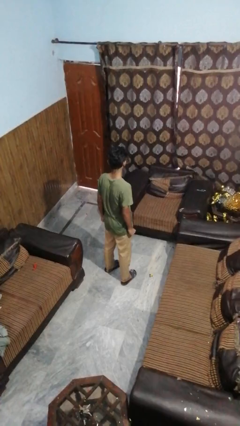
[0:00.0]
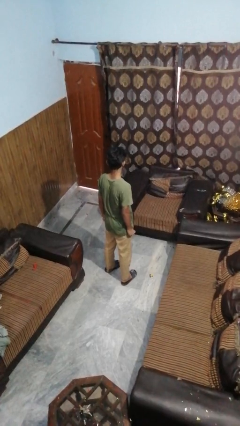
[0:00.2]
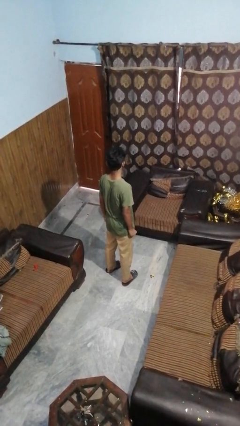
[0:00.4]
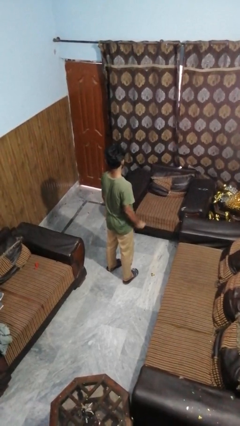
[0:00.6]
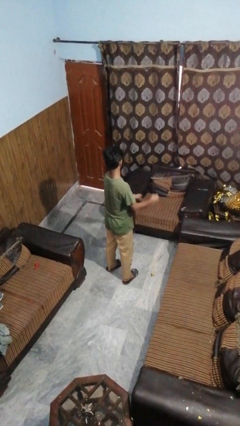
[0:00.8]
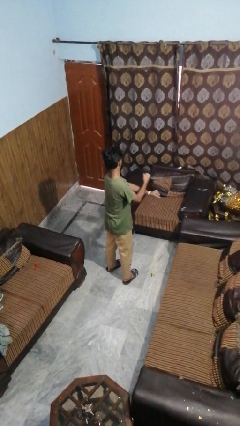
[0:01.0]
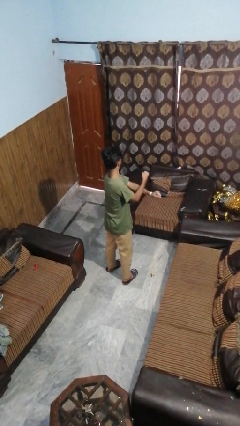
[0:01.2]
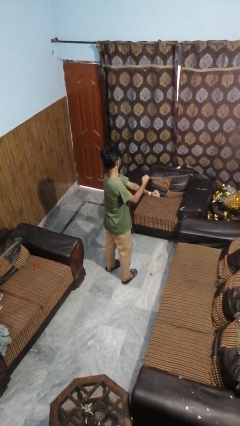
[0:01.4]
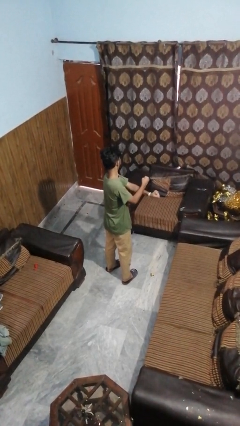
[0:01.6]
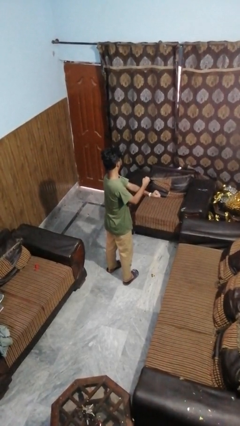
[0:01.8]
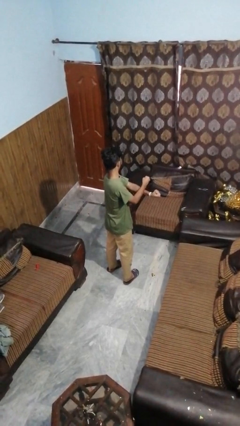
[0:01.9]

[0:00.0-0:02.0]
person gestures arms x

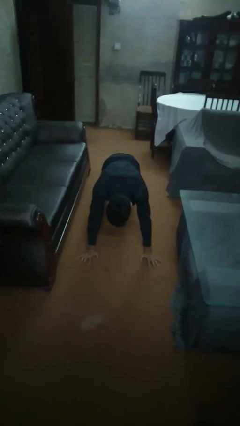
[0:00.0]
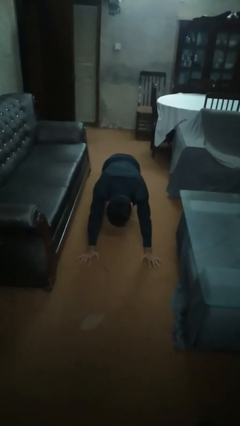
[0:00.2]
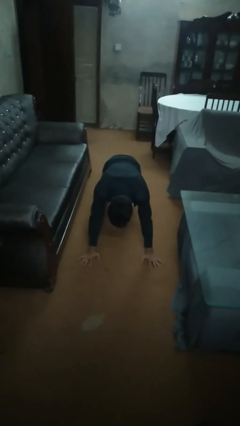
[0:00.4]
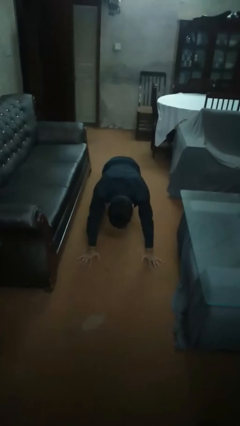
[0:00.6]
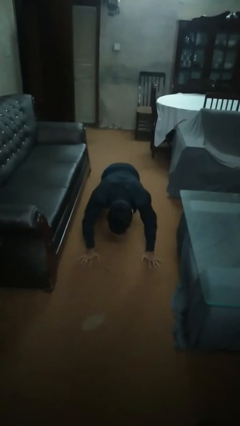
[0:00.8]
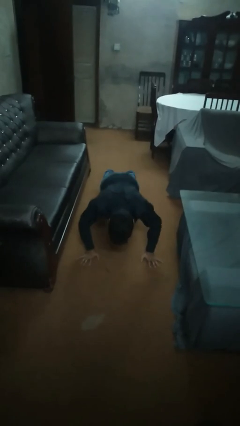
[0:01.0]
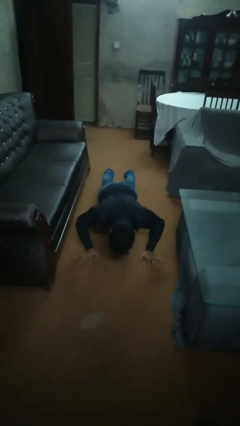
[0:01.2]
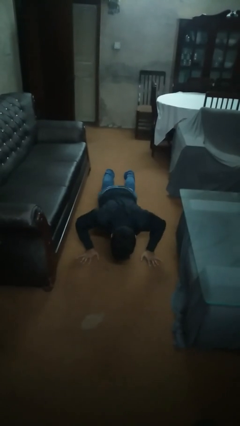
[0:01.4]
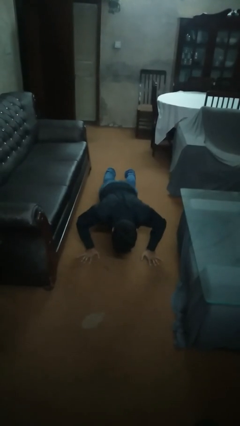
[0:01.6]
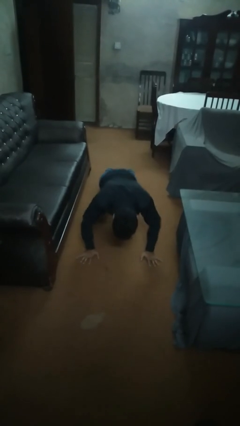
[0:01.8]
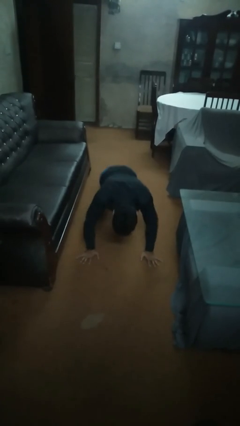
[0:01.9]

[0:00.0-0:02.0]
person exercises with pushup

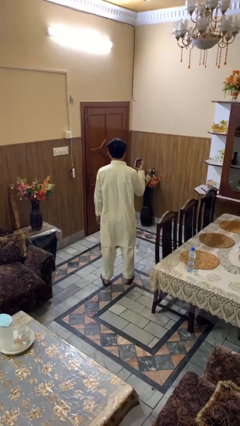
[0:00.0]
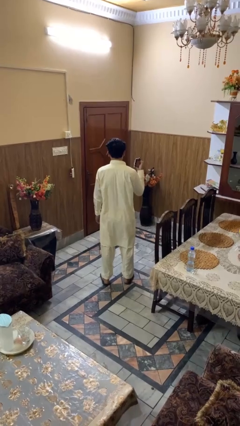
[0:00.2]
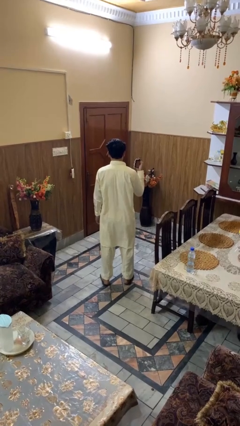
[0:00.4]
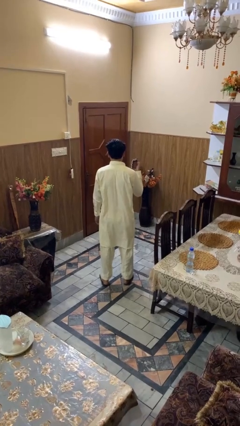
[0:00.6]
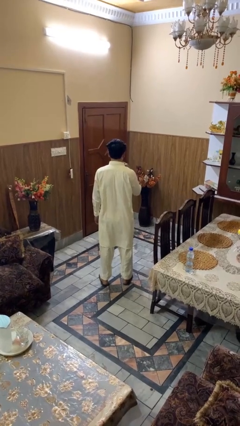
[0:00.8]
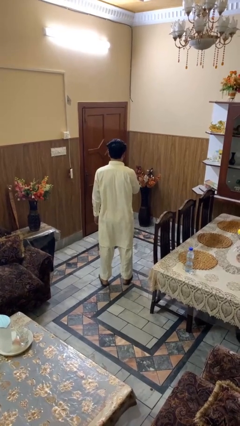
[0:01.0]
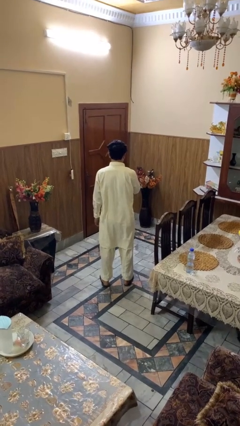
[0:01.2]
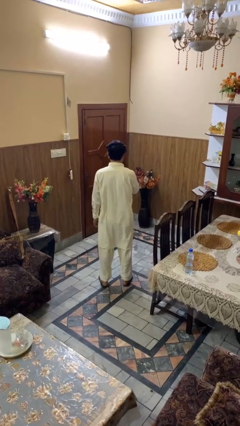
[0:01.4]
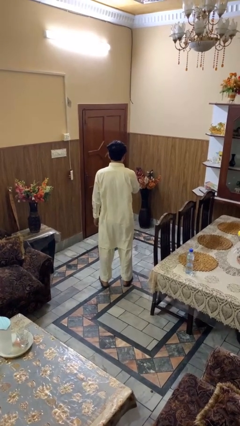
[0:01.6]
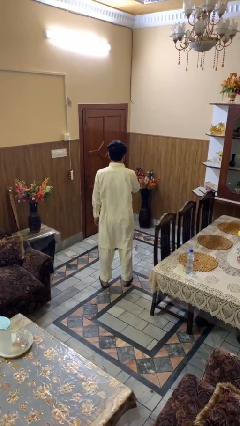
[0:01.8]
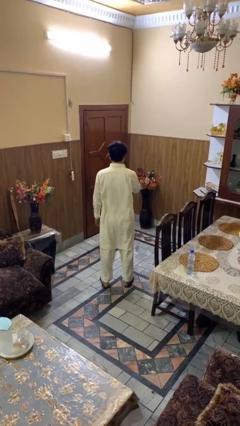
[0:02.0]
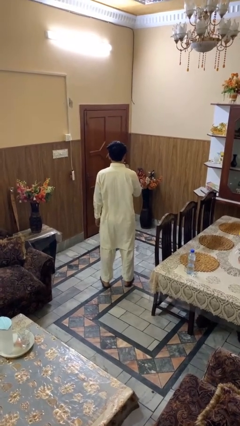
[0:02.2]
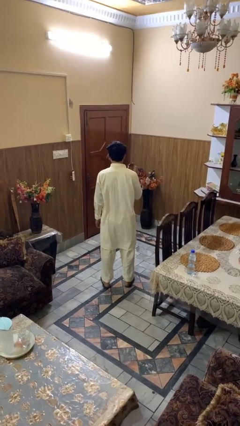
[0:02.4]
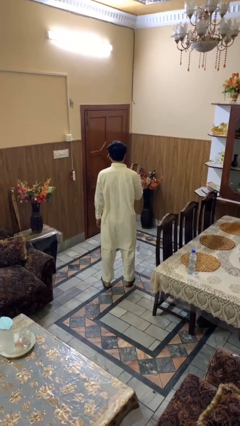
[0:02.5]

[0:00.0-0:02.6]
person vapes

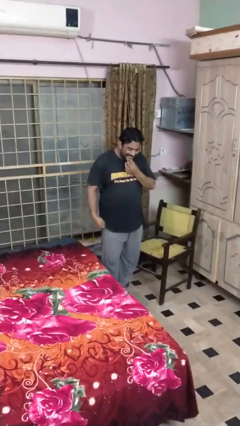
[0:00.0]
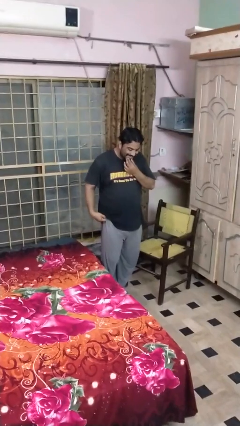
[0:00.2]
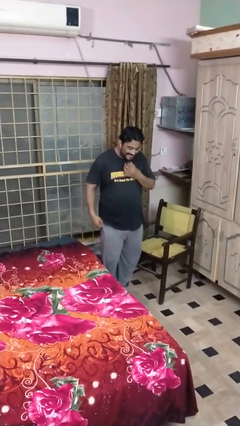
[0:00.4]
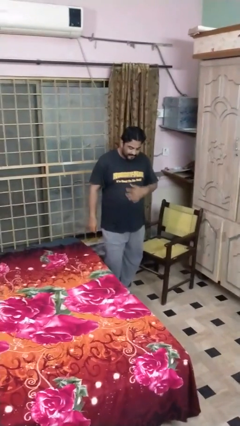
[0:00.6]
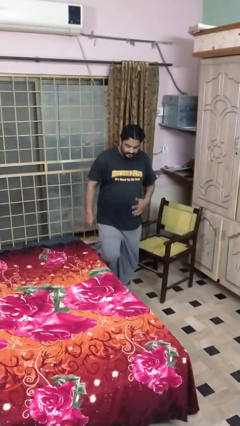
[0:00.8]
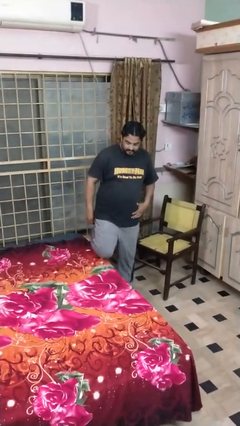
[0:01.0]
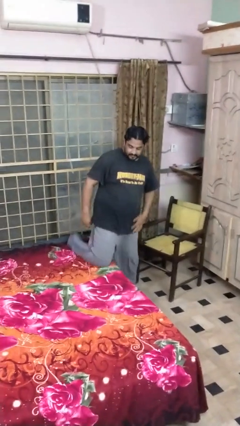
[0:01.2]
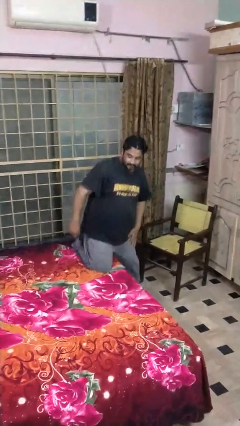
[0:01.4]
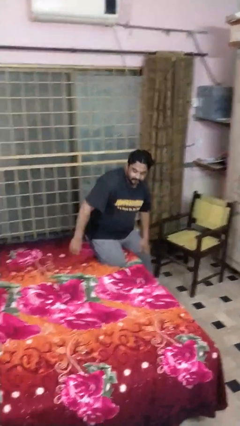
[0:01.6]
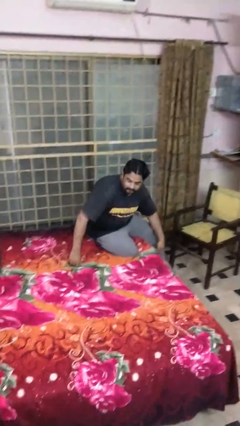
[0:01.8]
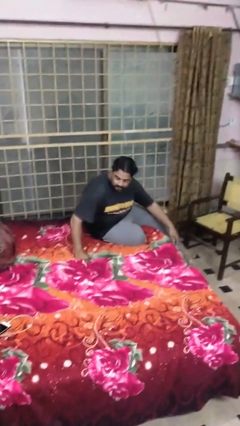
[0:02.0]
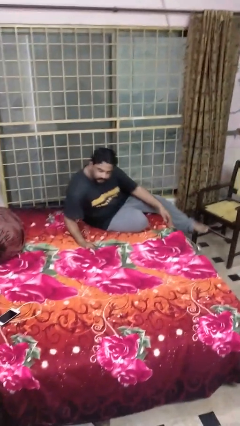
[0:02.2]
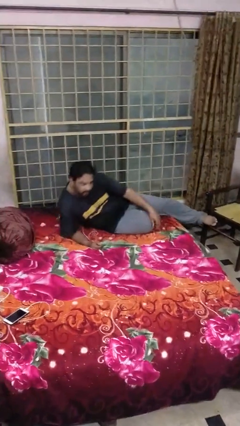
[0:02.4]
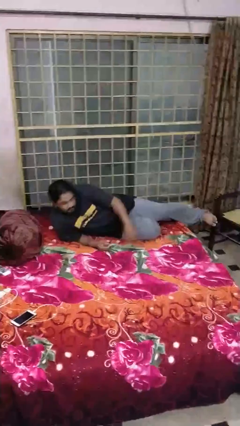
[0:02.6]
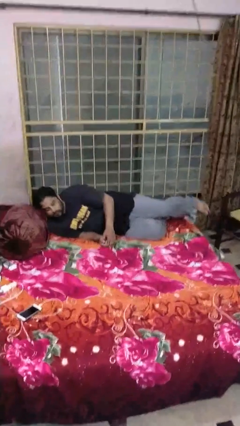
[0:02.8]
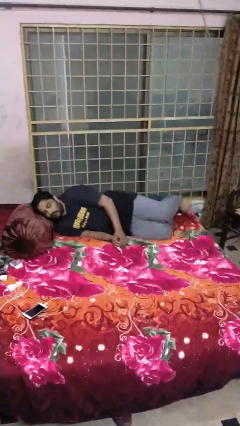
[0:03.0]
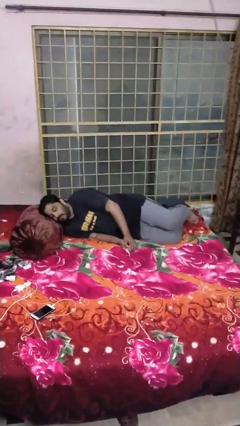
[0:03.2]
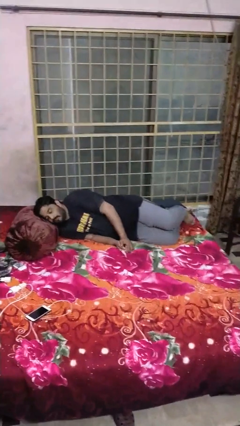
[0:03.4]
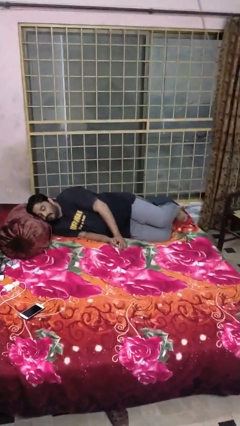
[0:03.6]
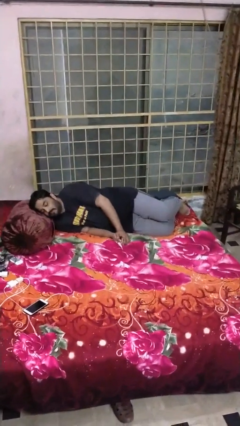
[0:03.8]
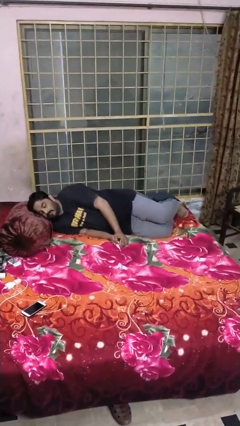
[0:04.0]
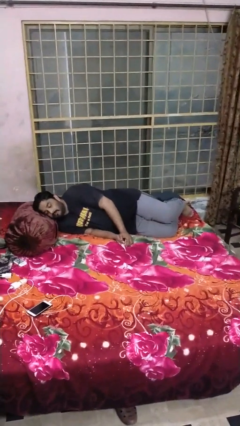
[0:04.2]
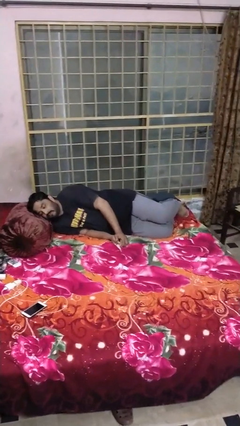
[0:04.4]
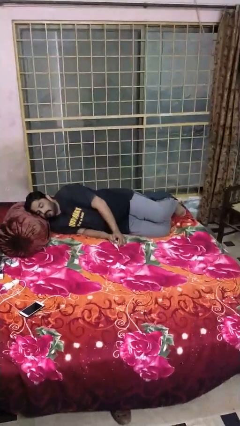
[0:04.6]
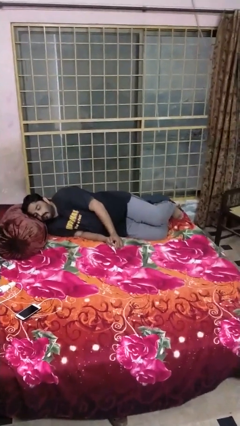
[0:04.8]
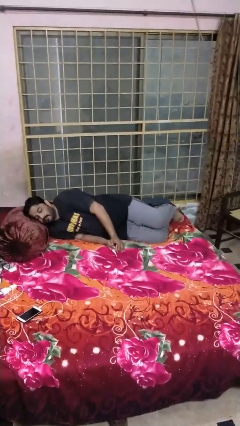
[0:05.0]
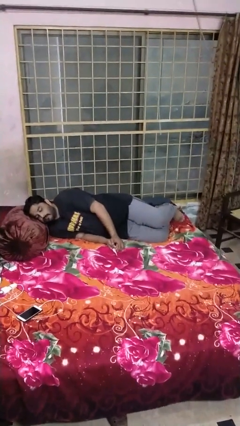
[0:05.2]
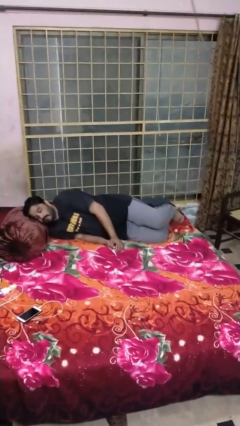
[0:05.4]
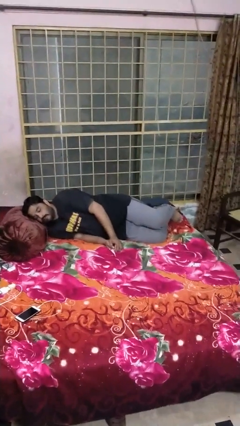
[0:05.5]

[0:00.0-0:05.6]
person lies down on bed

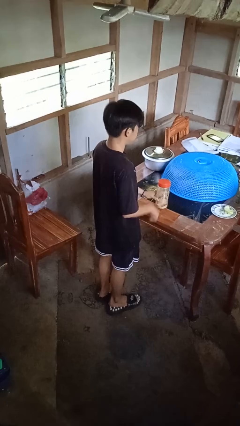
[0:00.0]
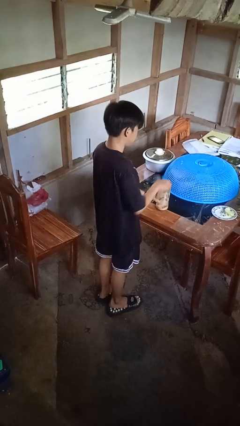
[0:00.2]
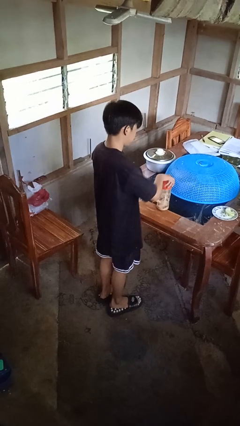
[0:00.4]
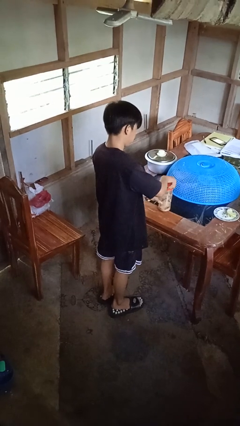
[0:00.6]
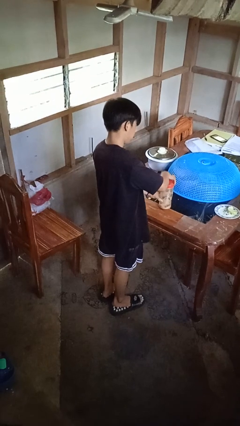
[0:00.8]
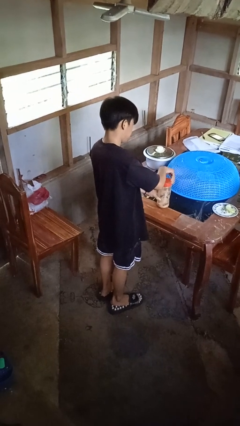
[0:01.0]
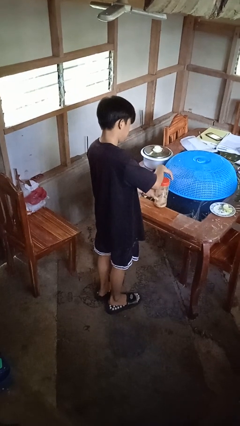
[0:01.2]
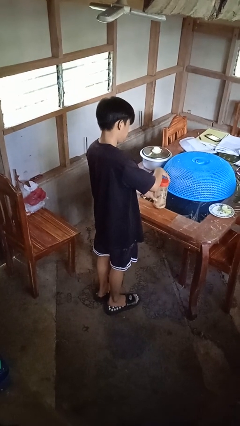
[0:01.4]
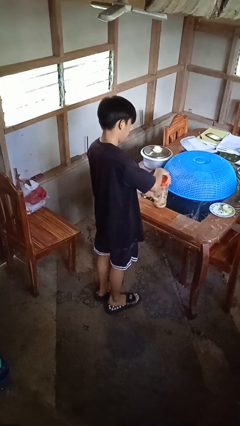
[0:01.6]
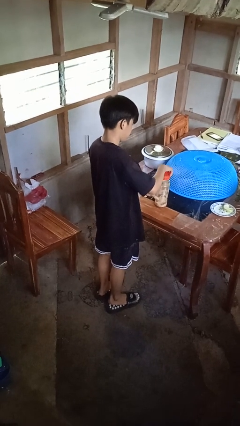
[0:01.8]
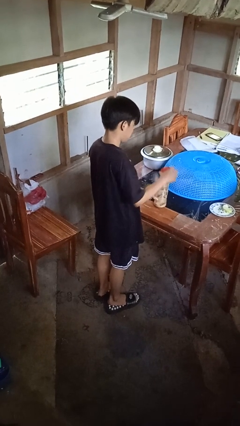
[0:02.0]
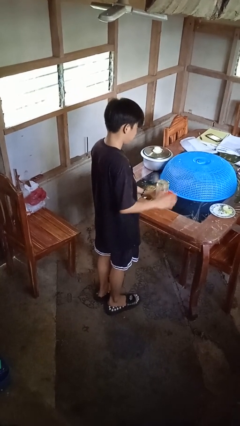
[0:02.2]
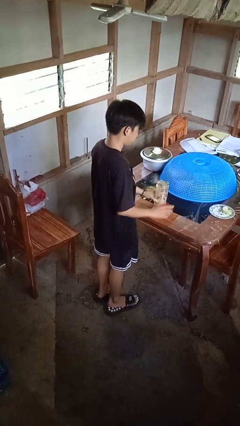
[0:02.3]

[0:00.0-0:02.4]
person opens jar

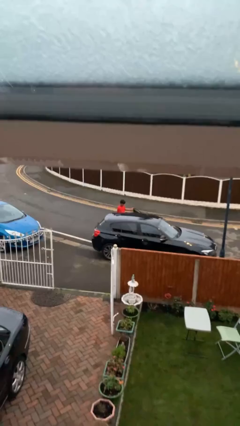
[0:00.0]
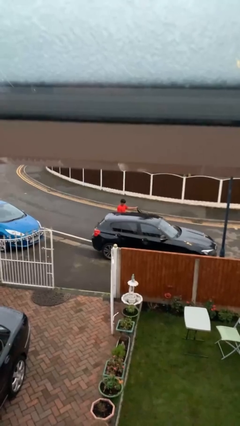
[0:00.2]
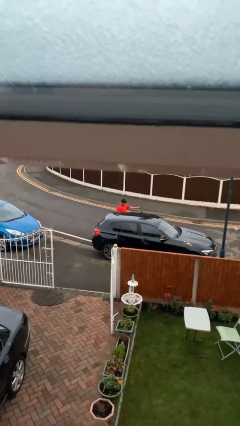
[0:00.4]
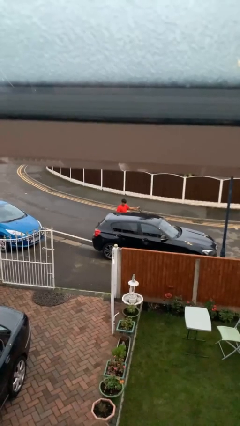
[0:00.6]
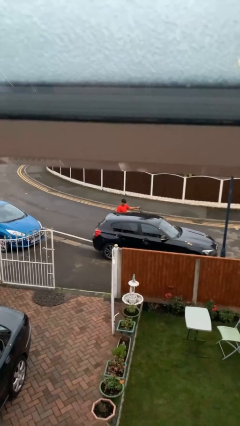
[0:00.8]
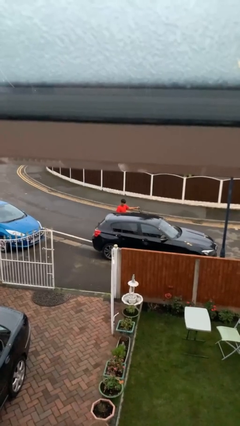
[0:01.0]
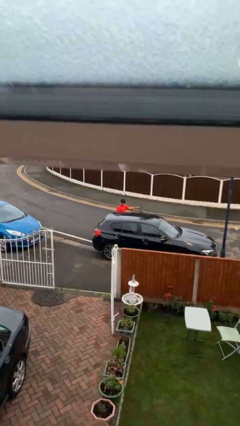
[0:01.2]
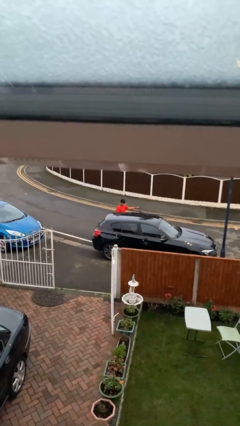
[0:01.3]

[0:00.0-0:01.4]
person opens car door

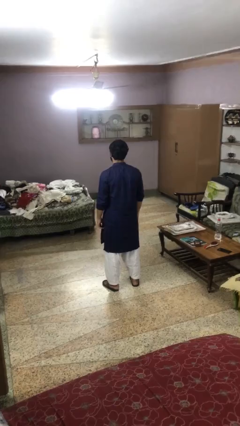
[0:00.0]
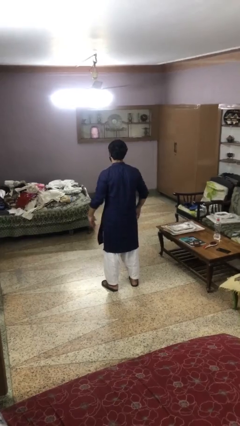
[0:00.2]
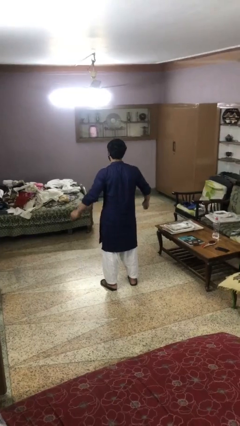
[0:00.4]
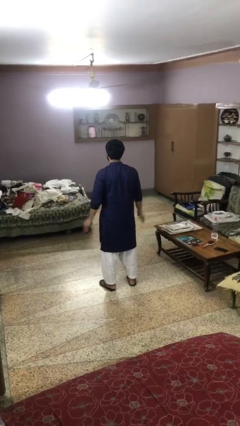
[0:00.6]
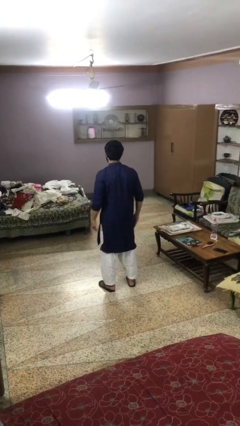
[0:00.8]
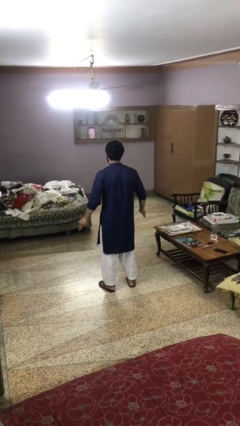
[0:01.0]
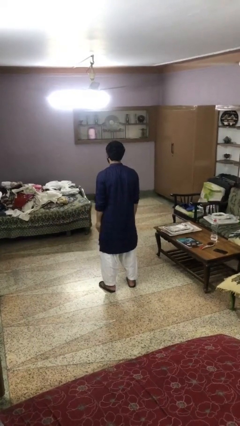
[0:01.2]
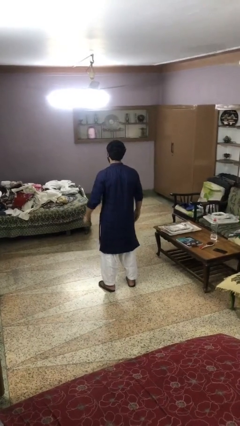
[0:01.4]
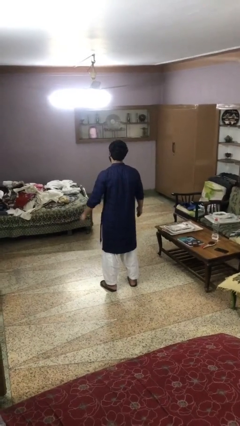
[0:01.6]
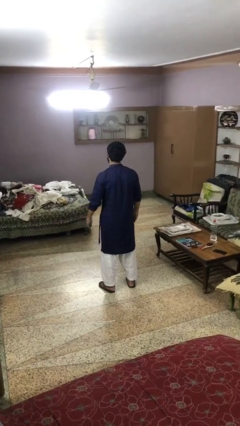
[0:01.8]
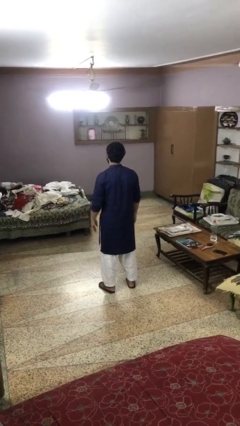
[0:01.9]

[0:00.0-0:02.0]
person slaps hands on thighs
